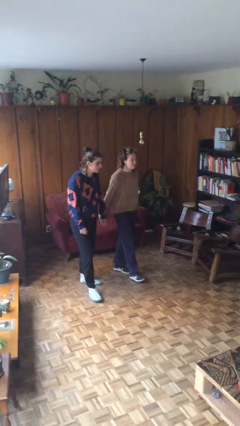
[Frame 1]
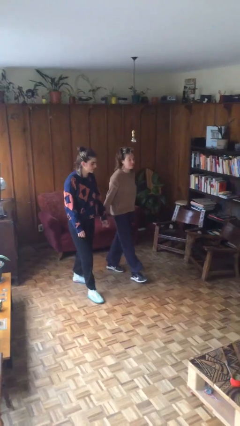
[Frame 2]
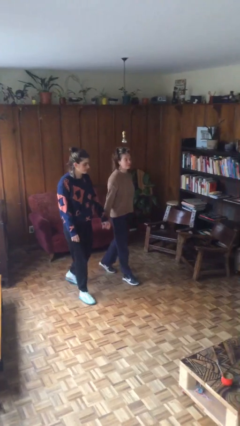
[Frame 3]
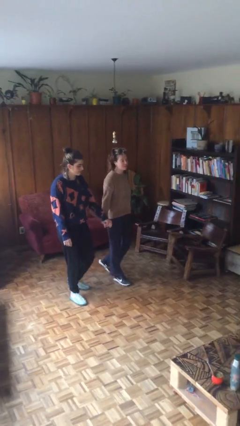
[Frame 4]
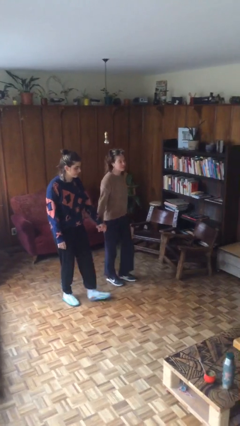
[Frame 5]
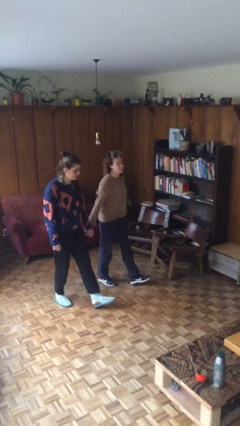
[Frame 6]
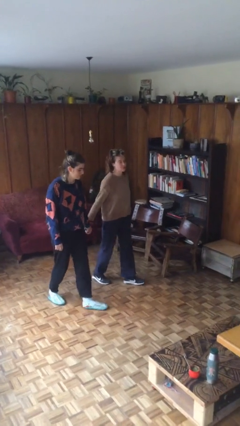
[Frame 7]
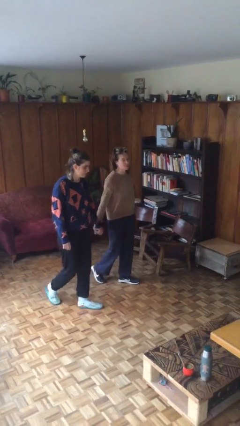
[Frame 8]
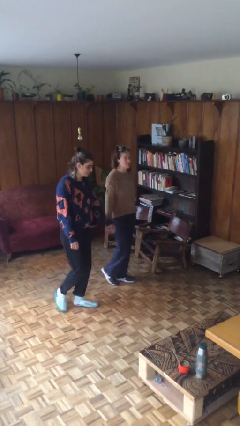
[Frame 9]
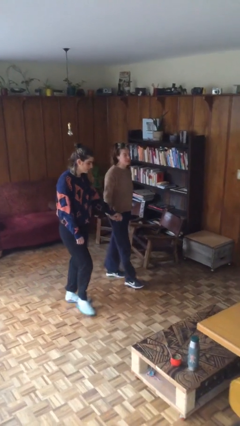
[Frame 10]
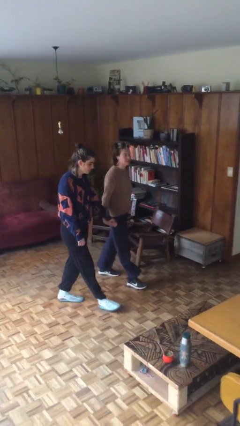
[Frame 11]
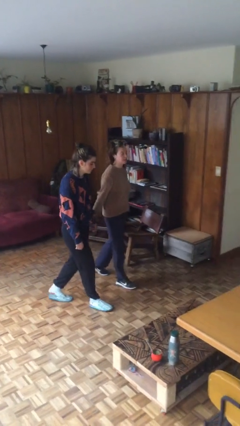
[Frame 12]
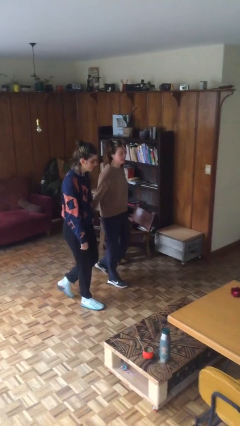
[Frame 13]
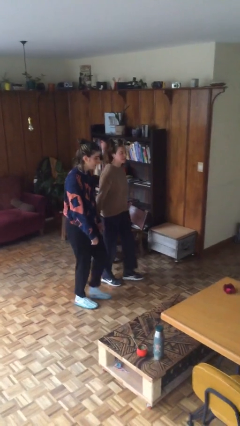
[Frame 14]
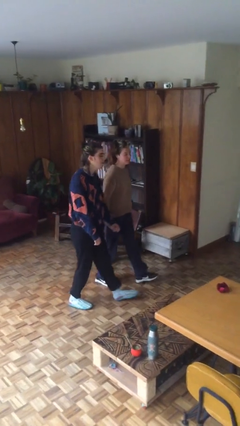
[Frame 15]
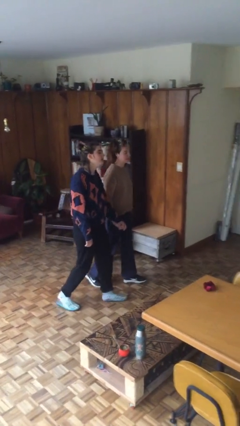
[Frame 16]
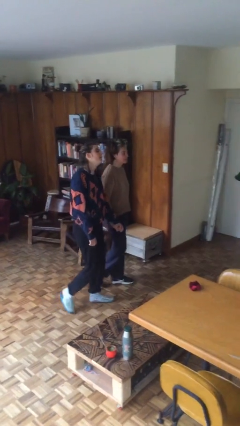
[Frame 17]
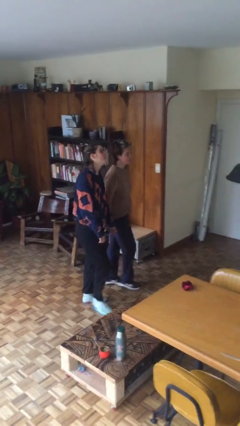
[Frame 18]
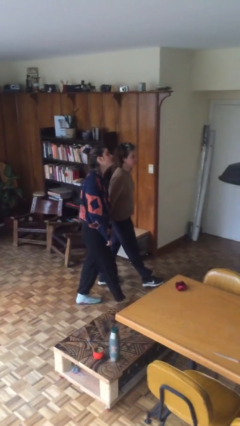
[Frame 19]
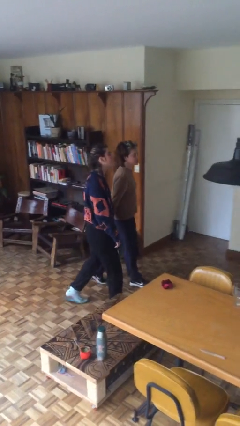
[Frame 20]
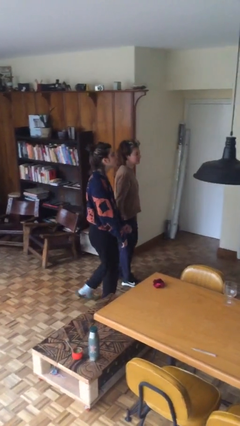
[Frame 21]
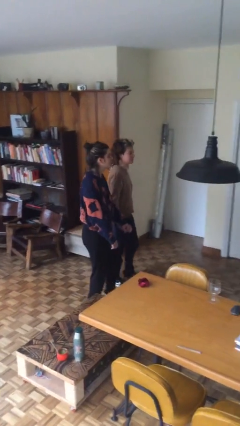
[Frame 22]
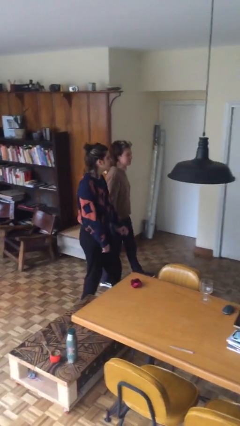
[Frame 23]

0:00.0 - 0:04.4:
person holds hand

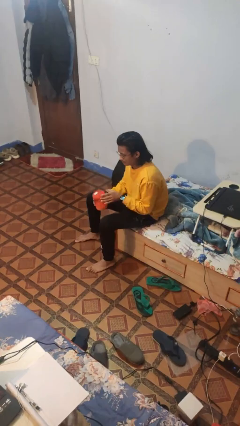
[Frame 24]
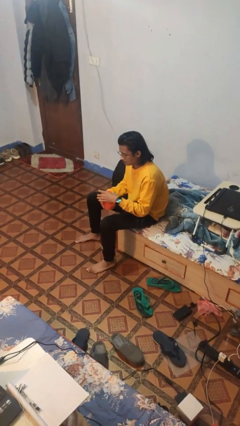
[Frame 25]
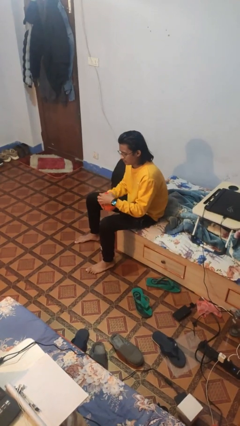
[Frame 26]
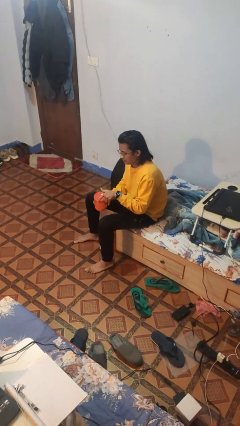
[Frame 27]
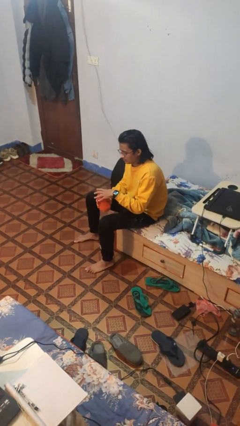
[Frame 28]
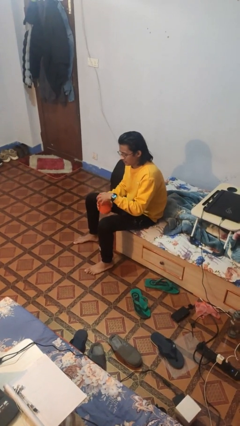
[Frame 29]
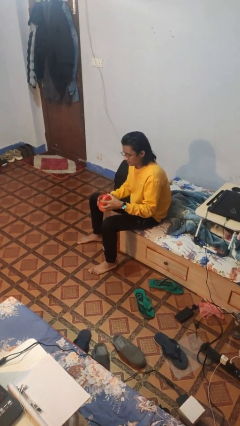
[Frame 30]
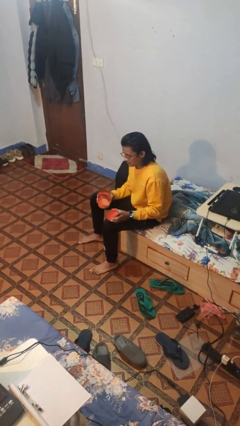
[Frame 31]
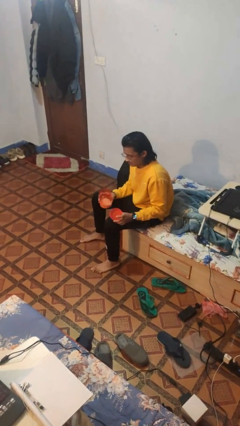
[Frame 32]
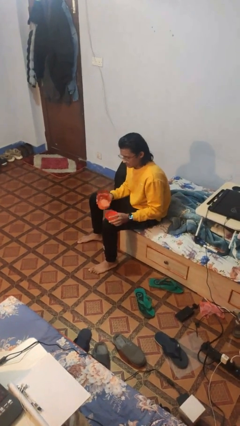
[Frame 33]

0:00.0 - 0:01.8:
person opens jar

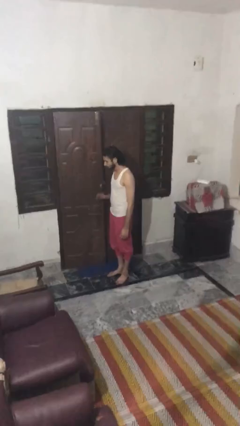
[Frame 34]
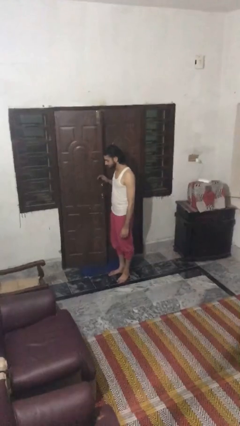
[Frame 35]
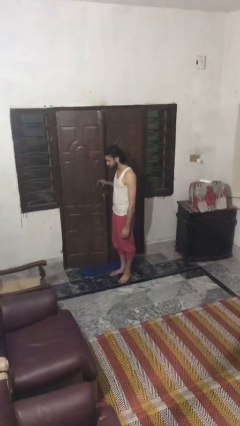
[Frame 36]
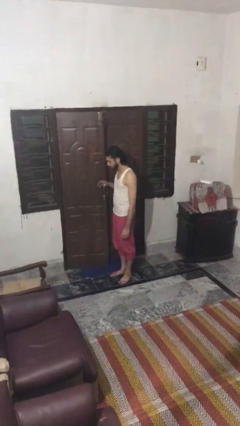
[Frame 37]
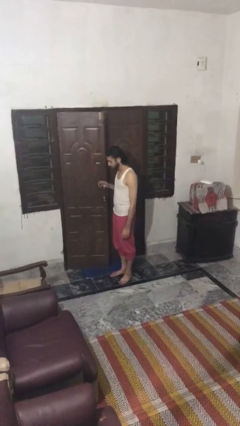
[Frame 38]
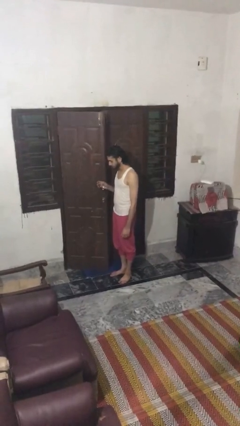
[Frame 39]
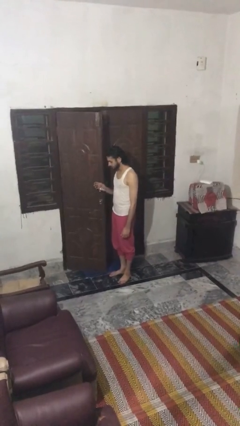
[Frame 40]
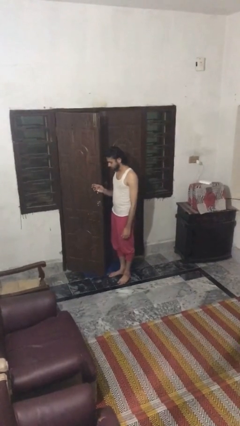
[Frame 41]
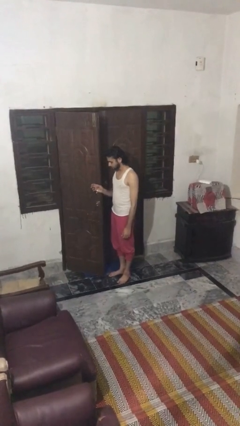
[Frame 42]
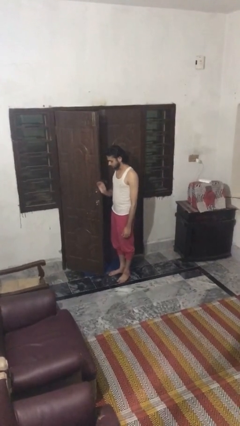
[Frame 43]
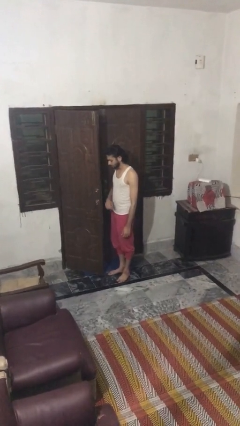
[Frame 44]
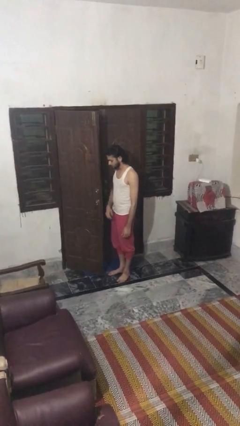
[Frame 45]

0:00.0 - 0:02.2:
person opens facility door

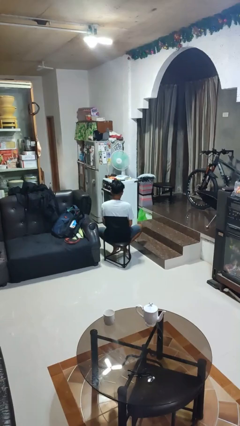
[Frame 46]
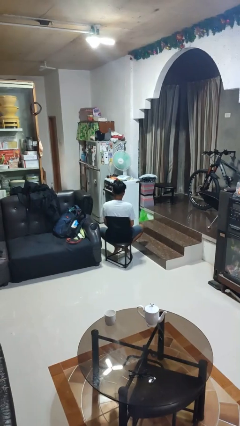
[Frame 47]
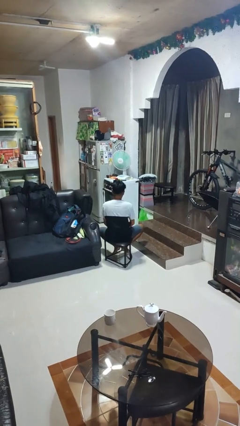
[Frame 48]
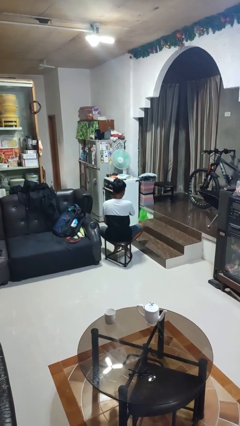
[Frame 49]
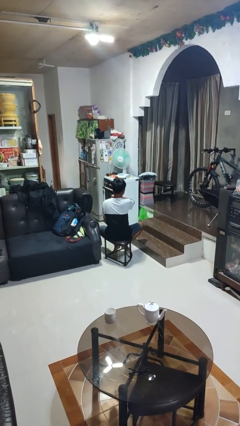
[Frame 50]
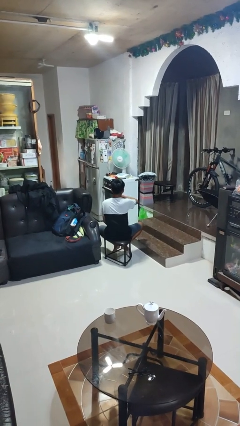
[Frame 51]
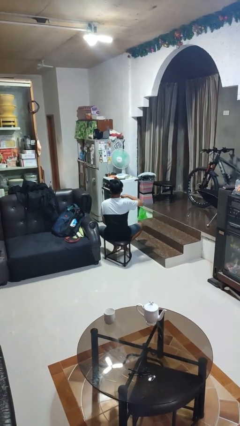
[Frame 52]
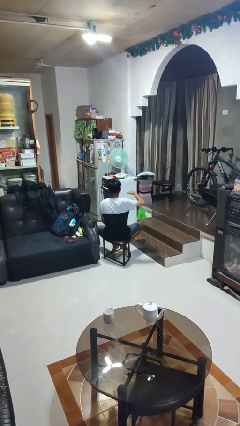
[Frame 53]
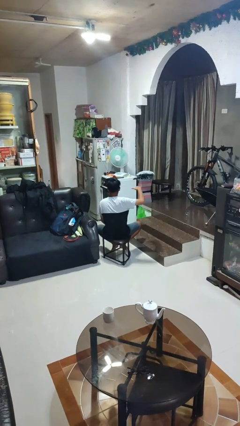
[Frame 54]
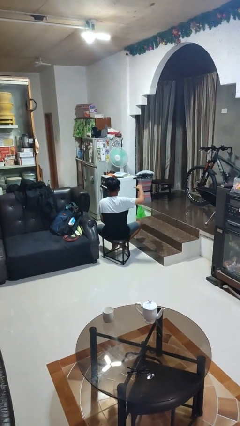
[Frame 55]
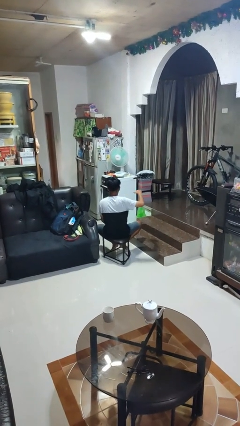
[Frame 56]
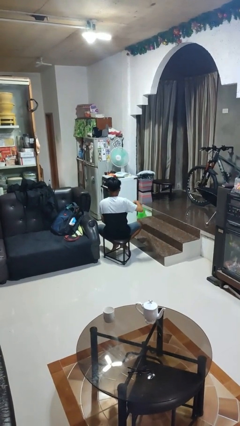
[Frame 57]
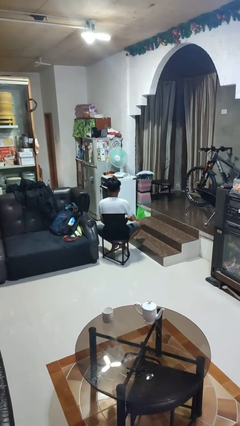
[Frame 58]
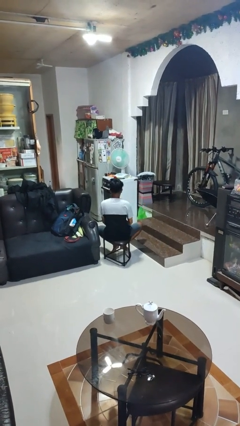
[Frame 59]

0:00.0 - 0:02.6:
person gestures cut

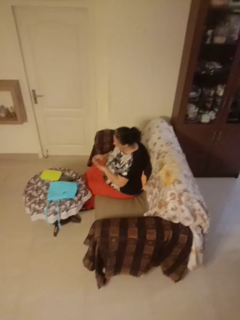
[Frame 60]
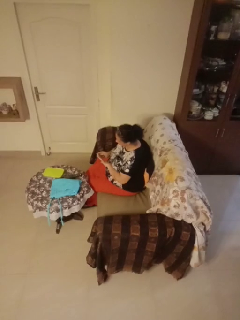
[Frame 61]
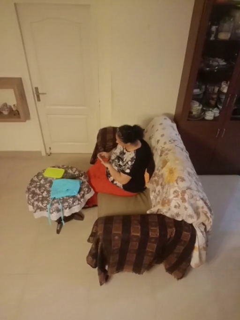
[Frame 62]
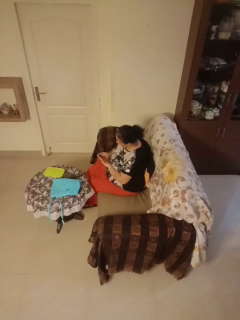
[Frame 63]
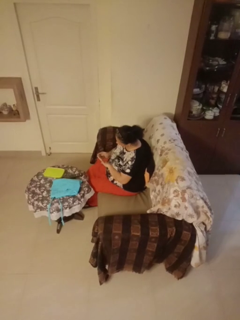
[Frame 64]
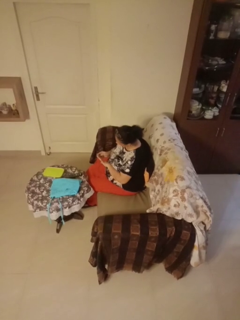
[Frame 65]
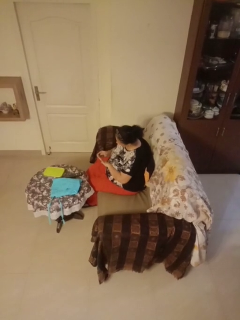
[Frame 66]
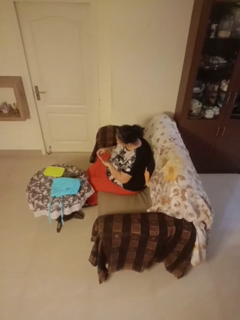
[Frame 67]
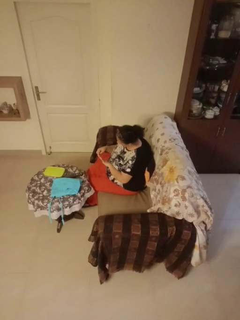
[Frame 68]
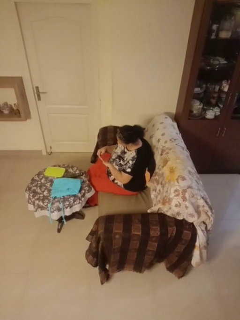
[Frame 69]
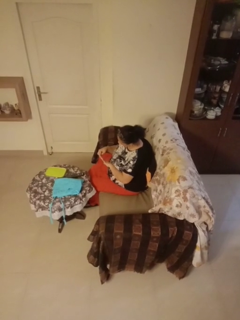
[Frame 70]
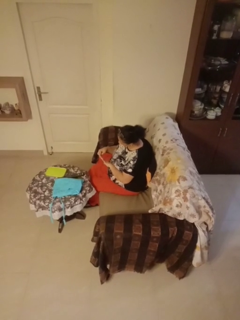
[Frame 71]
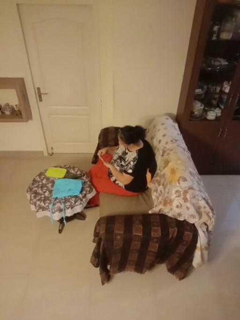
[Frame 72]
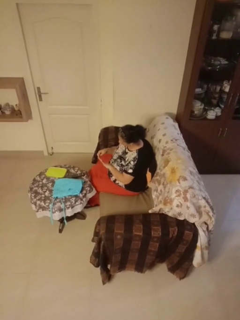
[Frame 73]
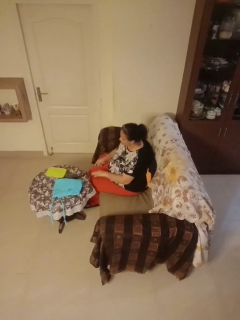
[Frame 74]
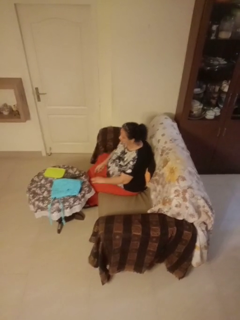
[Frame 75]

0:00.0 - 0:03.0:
person files fingernails

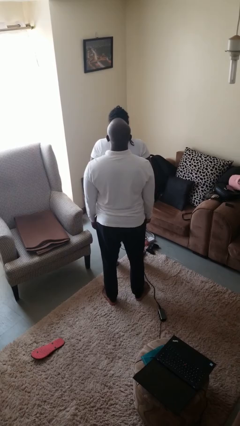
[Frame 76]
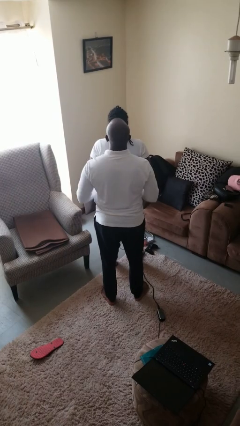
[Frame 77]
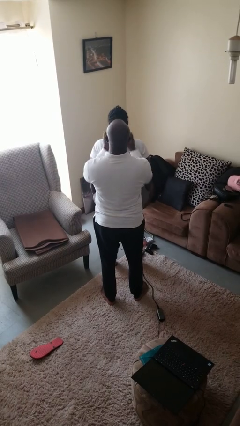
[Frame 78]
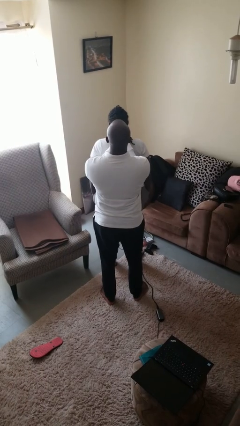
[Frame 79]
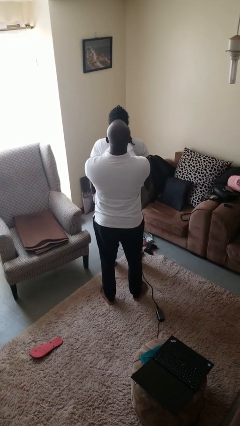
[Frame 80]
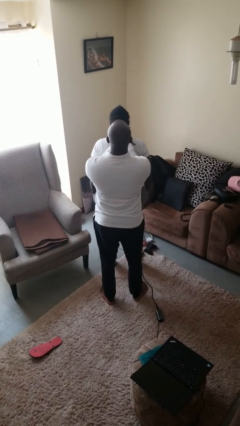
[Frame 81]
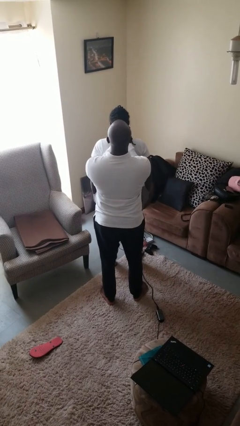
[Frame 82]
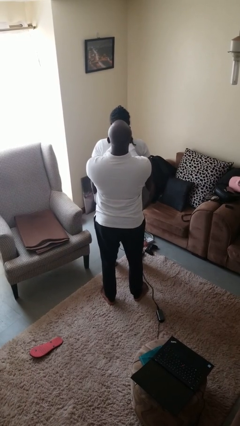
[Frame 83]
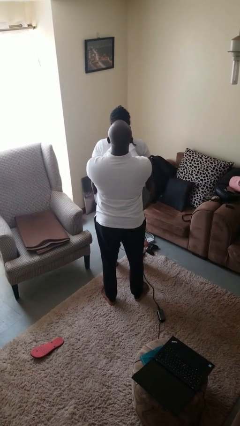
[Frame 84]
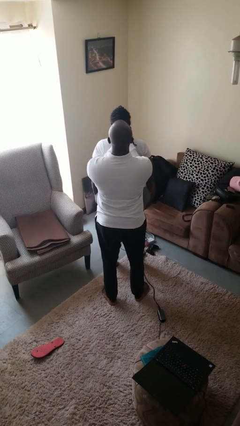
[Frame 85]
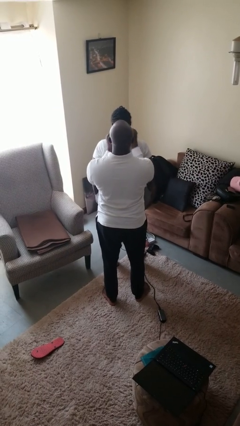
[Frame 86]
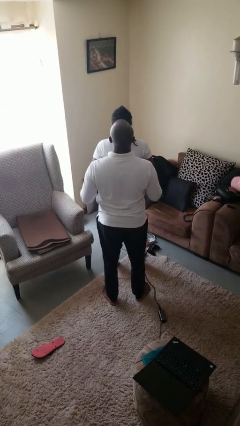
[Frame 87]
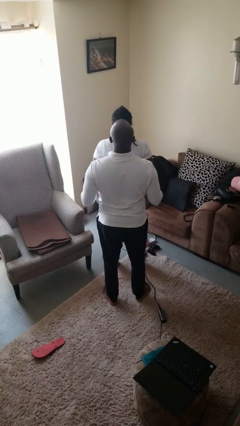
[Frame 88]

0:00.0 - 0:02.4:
person grabs person by hair

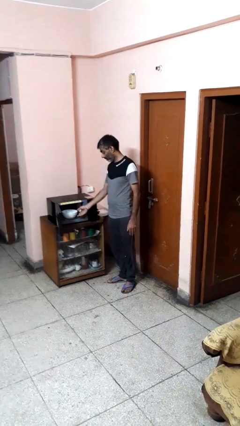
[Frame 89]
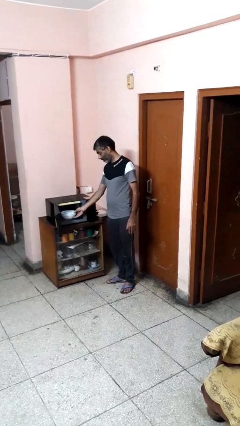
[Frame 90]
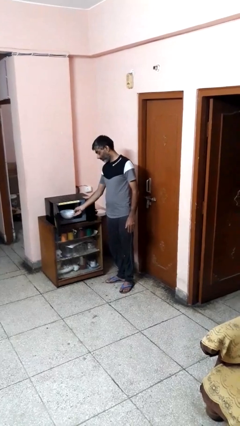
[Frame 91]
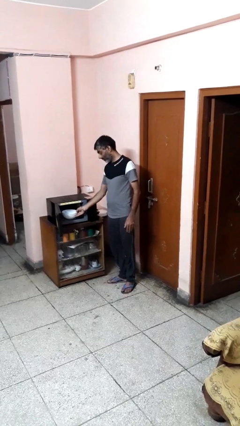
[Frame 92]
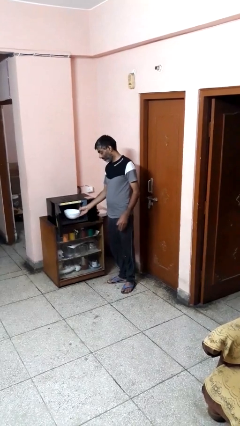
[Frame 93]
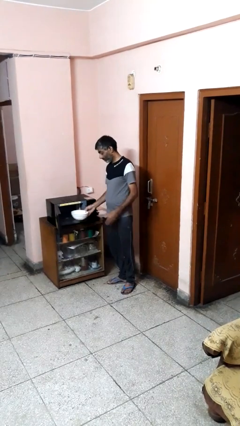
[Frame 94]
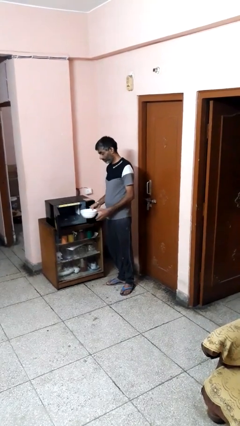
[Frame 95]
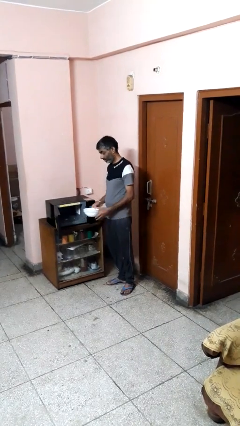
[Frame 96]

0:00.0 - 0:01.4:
person takes object from microwave
